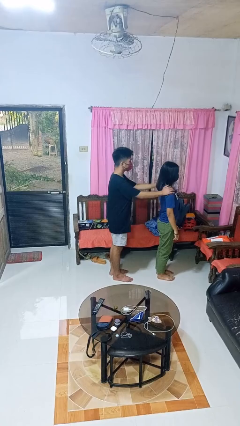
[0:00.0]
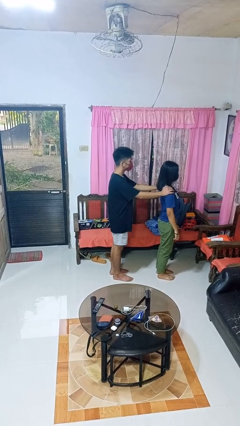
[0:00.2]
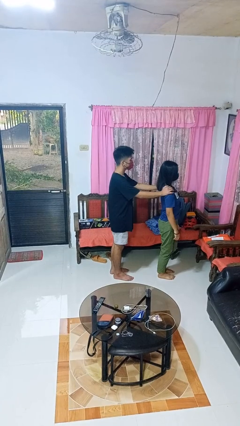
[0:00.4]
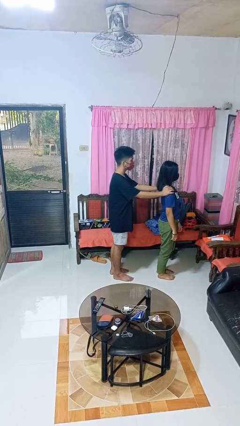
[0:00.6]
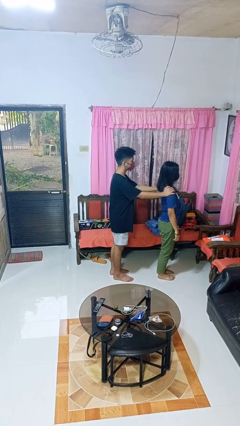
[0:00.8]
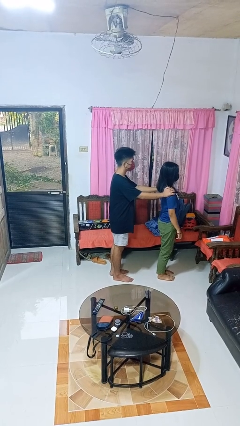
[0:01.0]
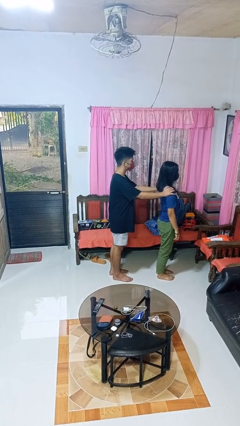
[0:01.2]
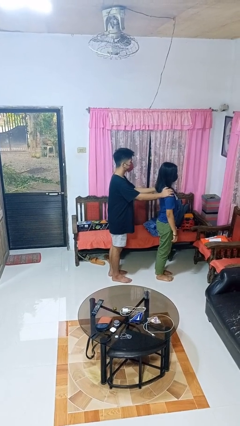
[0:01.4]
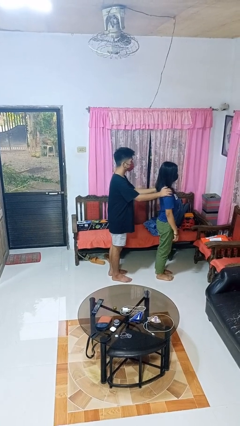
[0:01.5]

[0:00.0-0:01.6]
person grabs person by shoulder

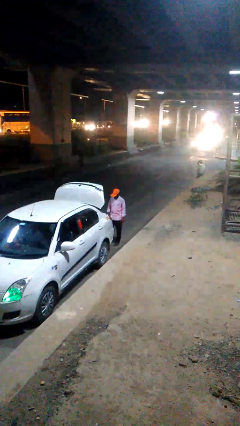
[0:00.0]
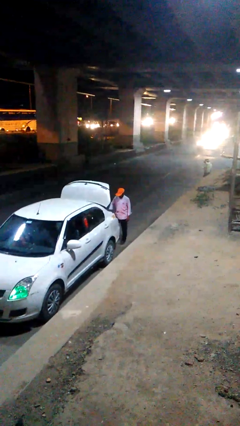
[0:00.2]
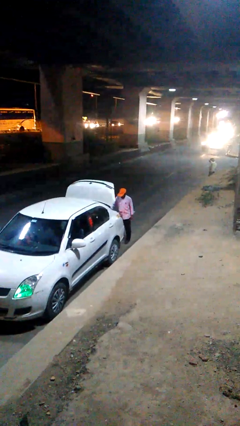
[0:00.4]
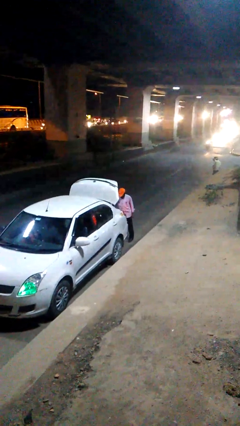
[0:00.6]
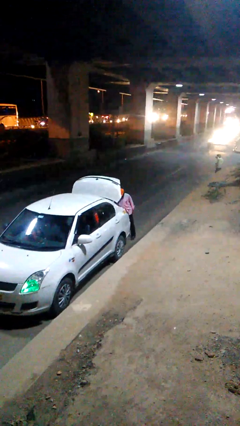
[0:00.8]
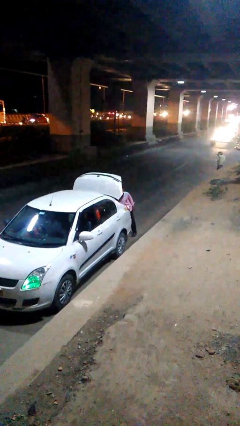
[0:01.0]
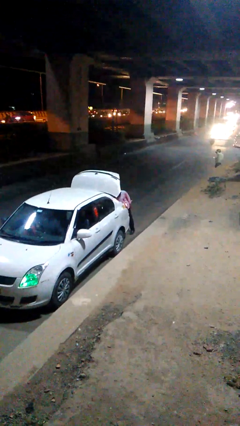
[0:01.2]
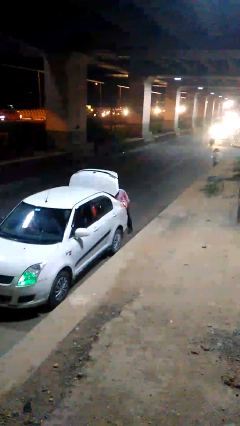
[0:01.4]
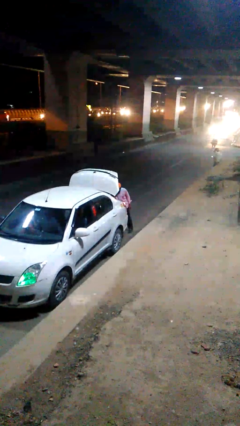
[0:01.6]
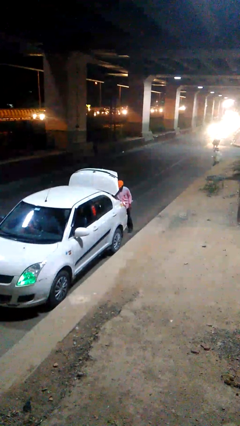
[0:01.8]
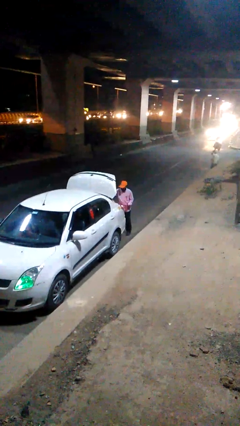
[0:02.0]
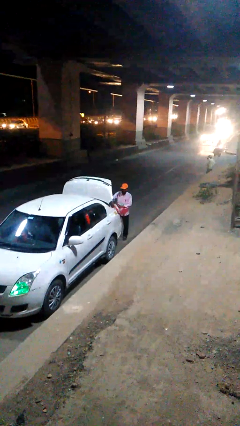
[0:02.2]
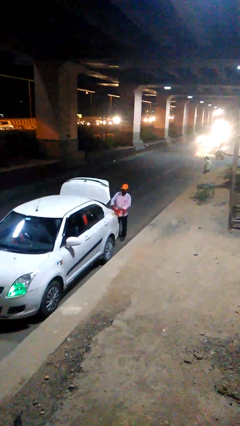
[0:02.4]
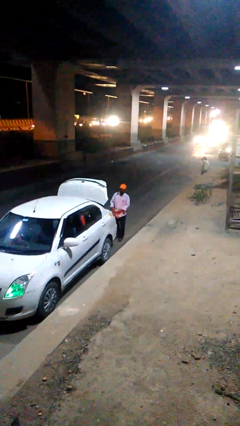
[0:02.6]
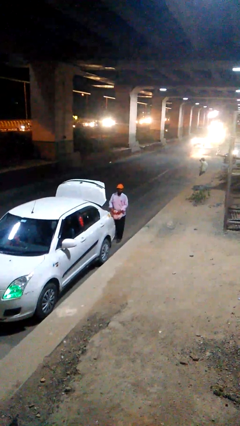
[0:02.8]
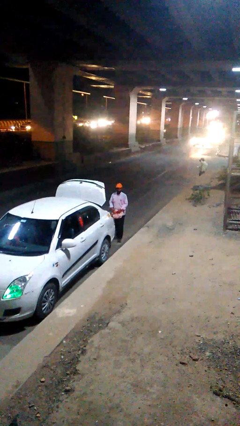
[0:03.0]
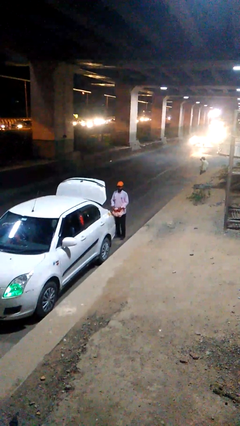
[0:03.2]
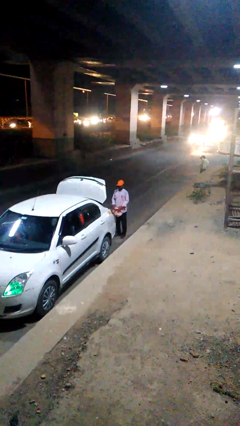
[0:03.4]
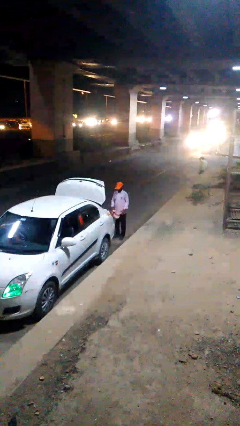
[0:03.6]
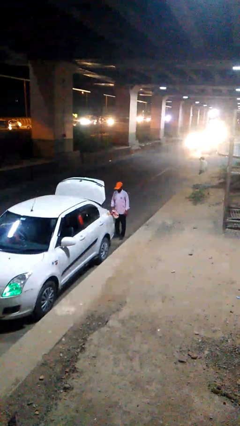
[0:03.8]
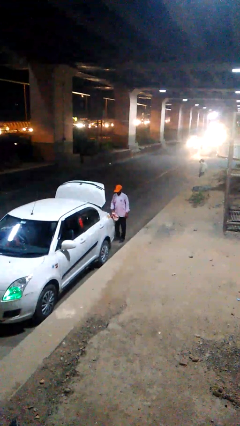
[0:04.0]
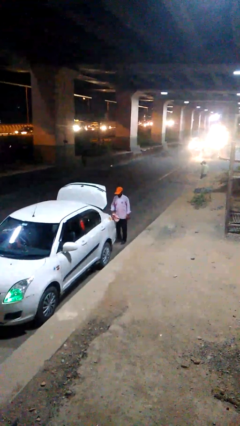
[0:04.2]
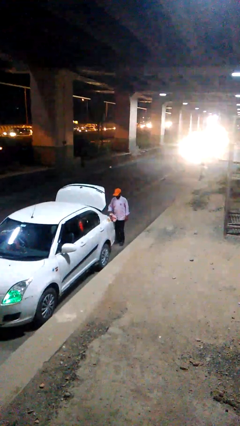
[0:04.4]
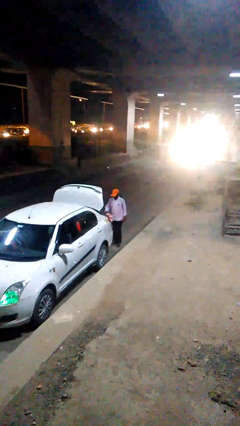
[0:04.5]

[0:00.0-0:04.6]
person unloads car

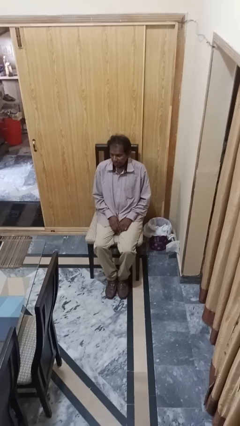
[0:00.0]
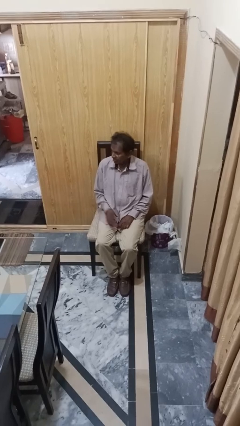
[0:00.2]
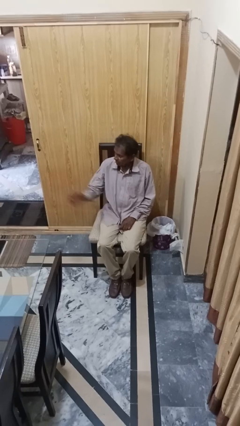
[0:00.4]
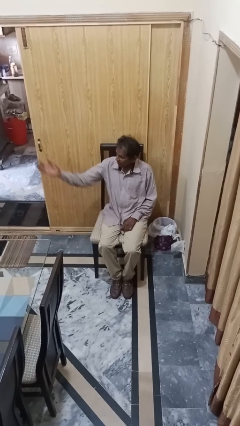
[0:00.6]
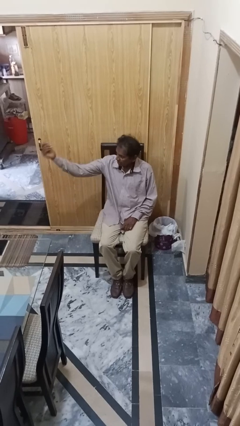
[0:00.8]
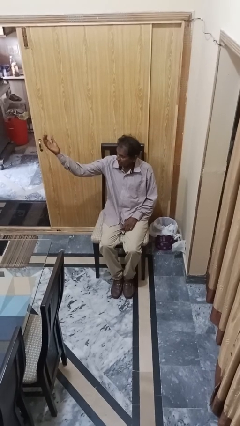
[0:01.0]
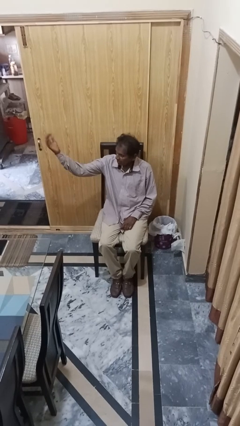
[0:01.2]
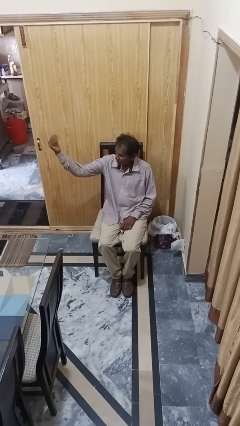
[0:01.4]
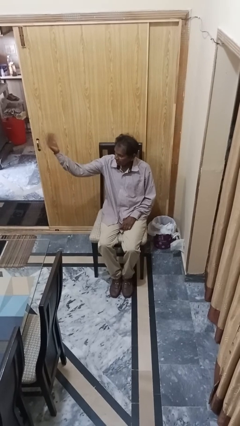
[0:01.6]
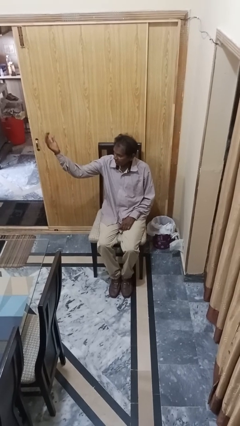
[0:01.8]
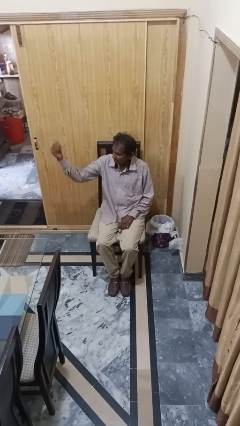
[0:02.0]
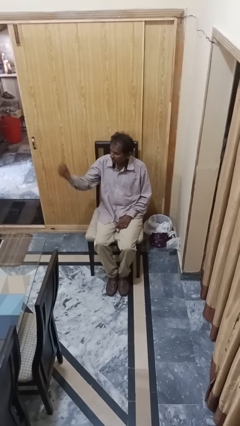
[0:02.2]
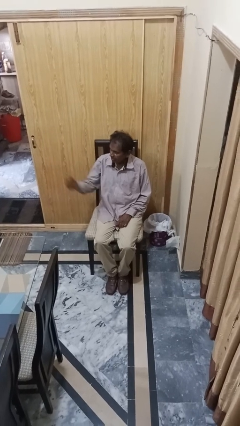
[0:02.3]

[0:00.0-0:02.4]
person gestures come here

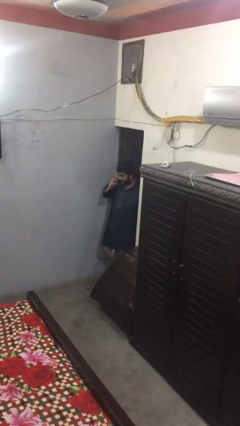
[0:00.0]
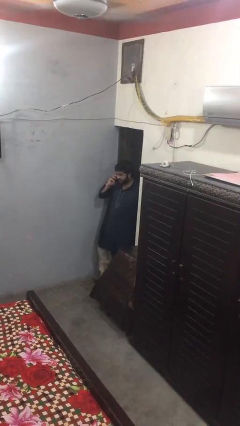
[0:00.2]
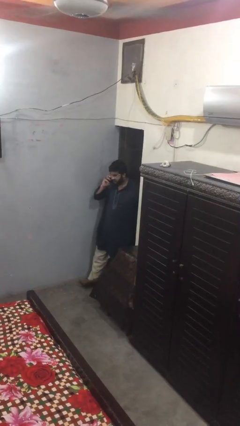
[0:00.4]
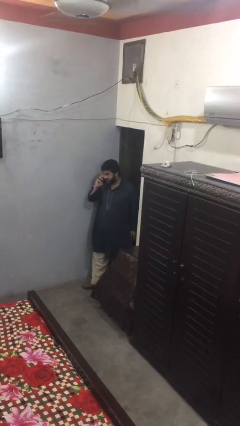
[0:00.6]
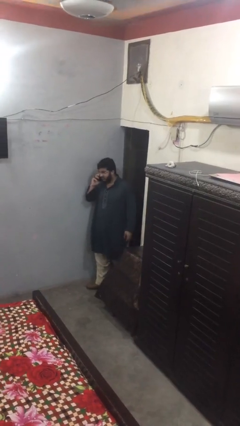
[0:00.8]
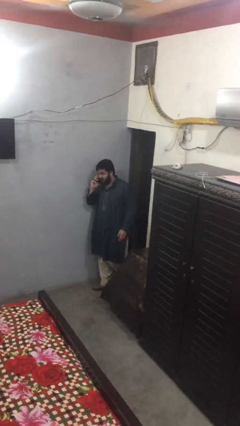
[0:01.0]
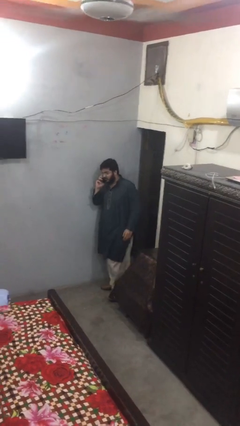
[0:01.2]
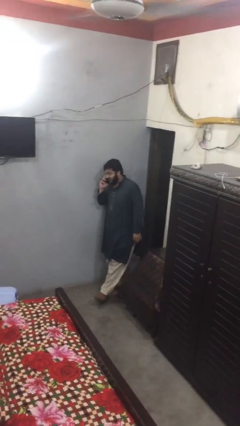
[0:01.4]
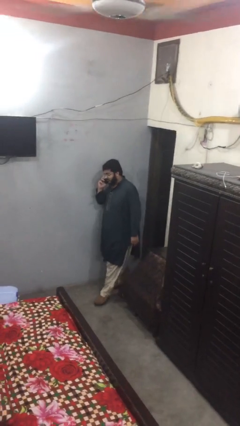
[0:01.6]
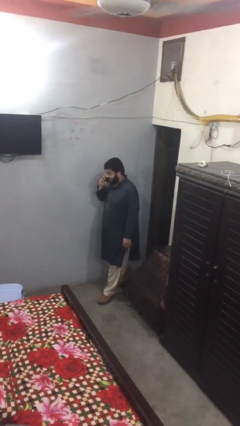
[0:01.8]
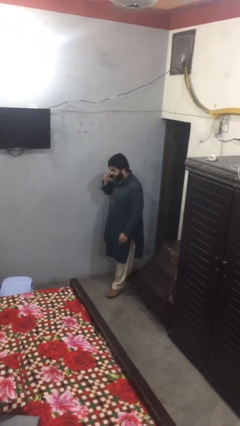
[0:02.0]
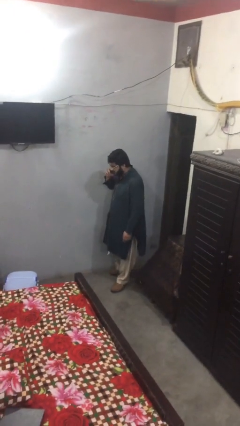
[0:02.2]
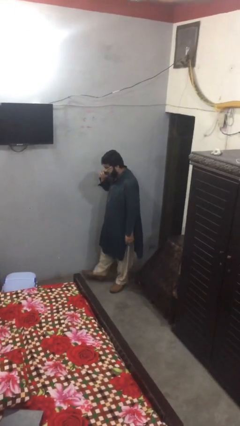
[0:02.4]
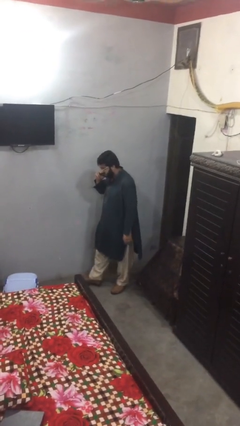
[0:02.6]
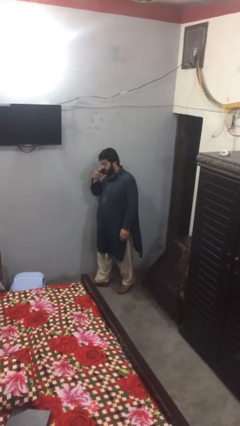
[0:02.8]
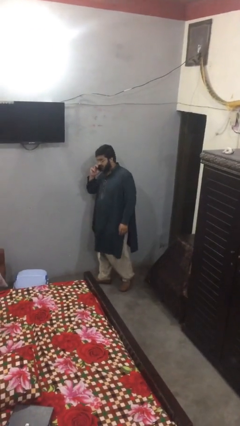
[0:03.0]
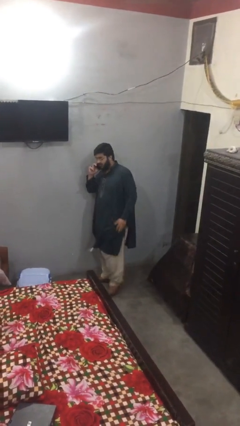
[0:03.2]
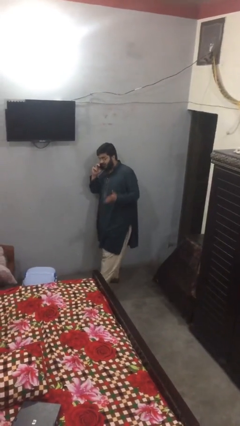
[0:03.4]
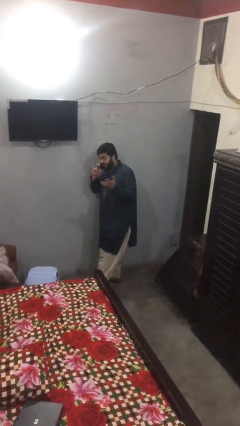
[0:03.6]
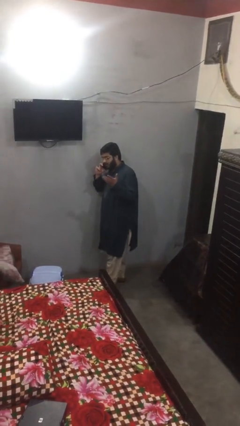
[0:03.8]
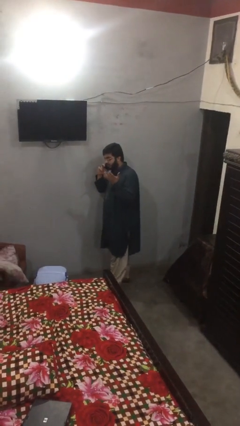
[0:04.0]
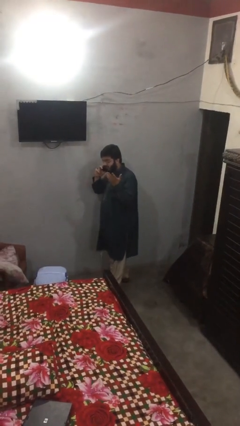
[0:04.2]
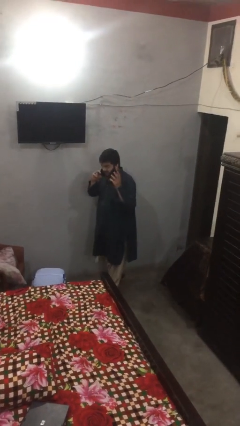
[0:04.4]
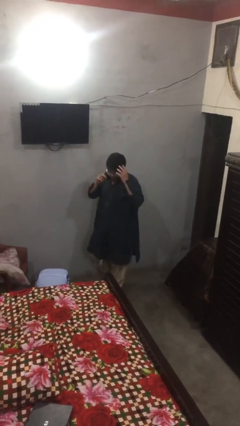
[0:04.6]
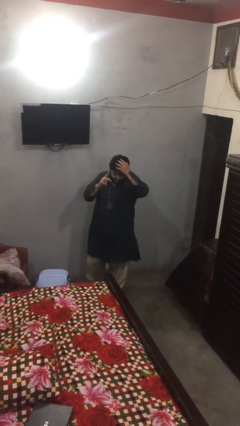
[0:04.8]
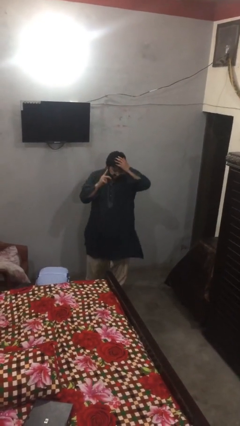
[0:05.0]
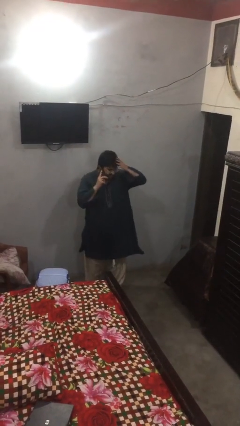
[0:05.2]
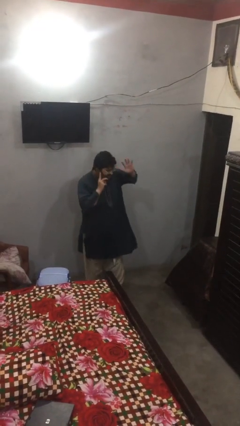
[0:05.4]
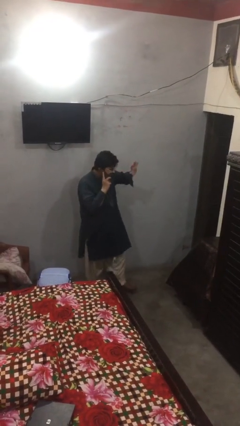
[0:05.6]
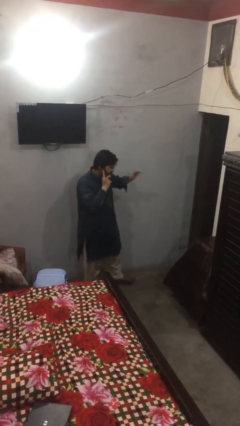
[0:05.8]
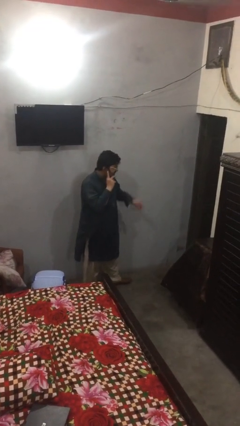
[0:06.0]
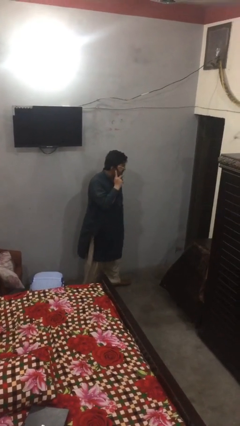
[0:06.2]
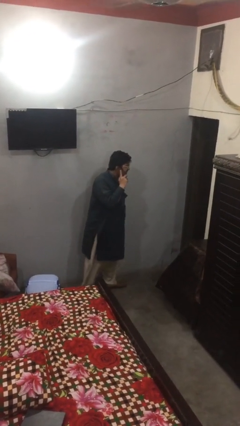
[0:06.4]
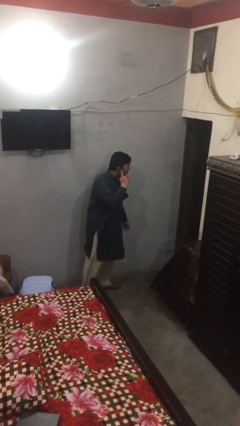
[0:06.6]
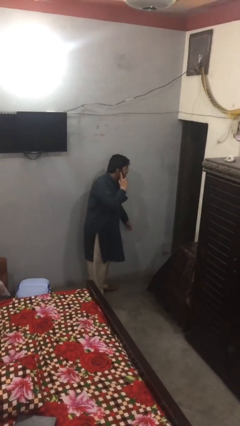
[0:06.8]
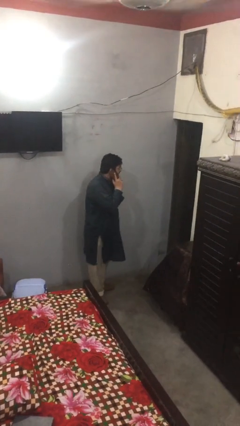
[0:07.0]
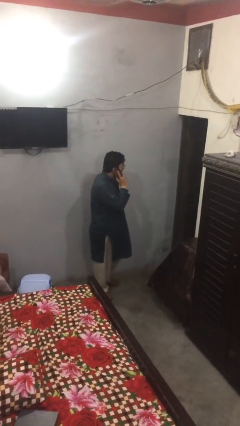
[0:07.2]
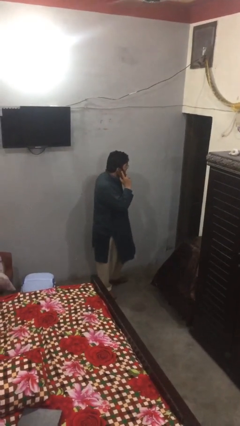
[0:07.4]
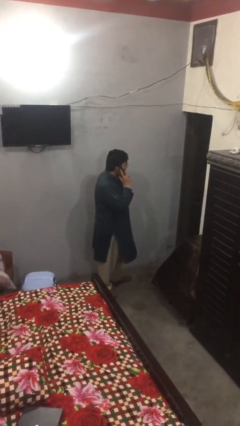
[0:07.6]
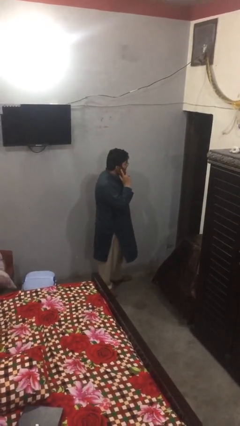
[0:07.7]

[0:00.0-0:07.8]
person enters scene through structure

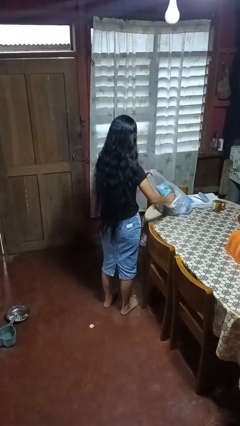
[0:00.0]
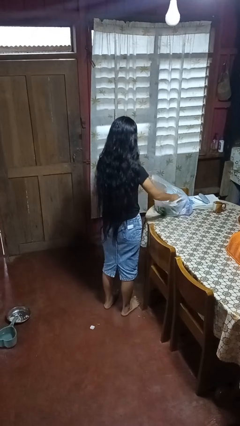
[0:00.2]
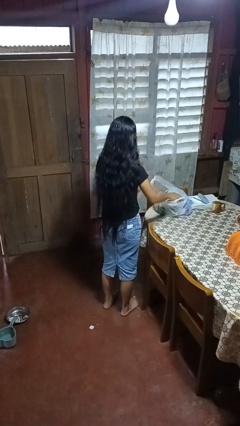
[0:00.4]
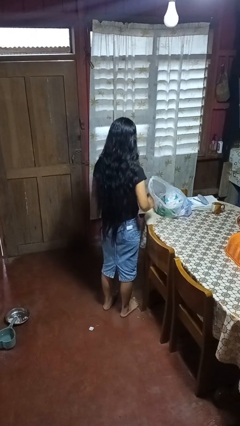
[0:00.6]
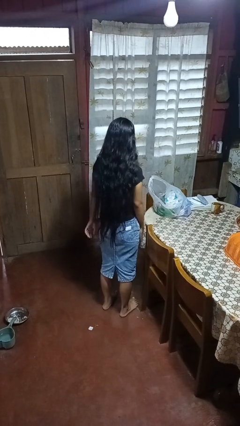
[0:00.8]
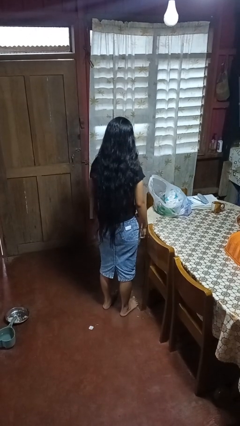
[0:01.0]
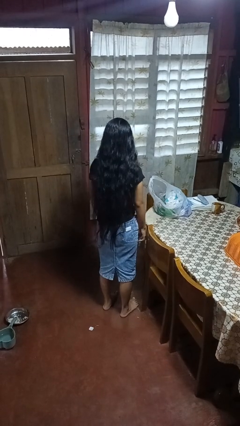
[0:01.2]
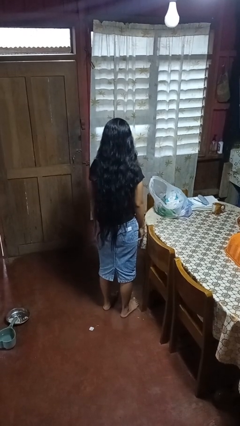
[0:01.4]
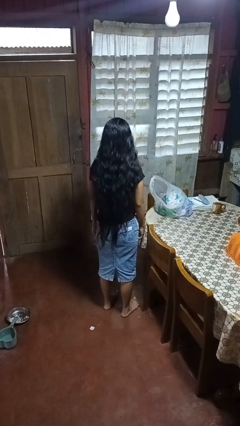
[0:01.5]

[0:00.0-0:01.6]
person puts object into bag
